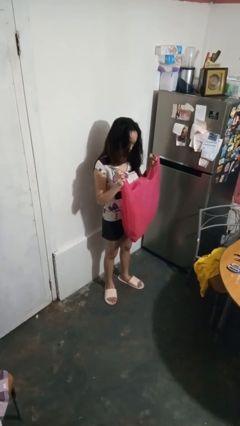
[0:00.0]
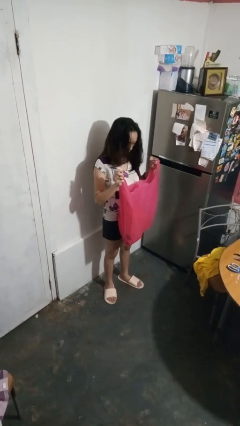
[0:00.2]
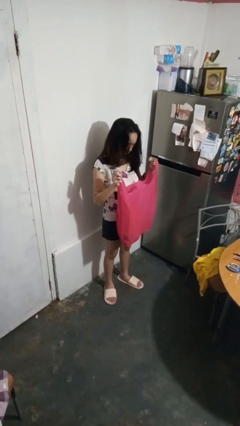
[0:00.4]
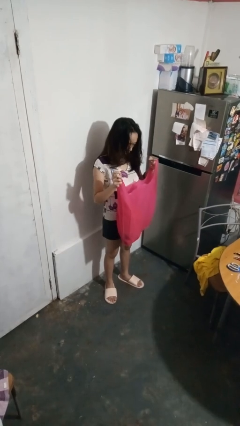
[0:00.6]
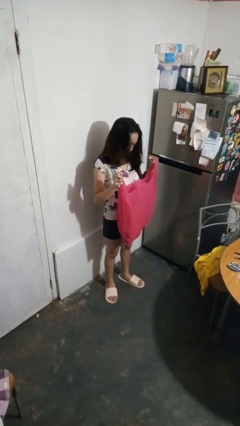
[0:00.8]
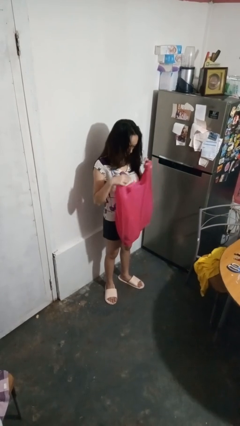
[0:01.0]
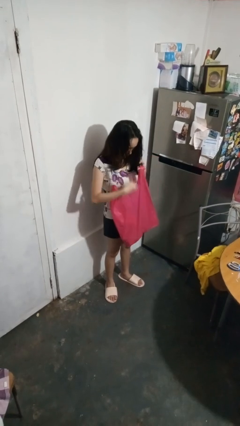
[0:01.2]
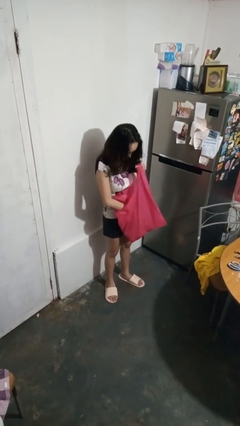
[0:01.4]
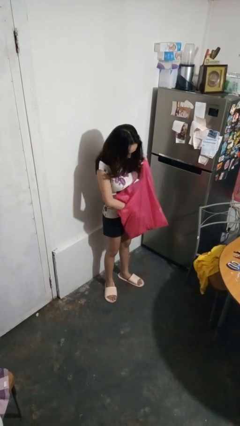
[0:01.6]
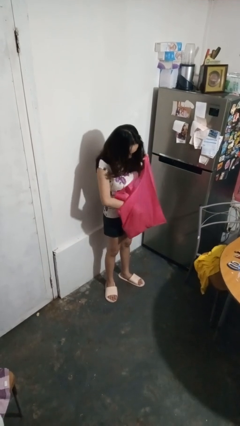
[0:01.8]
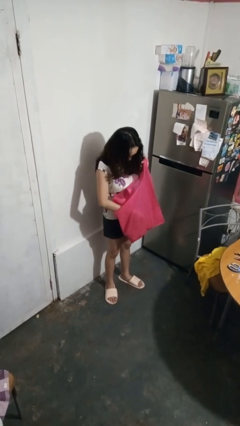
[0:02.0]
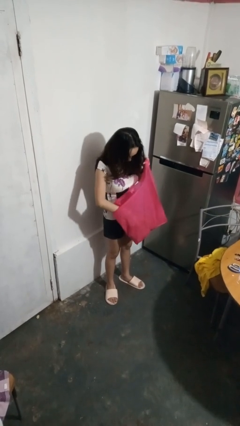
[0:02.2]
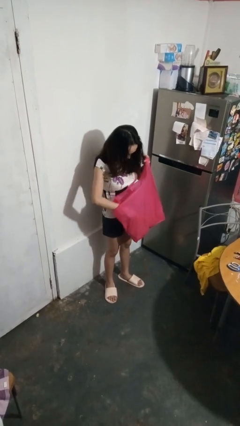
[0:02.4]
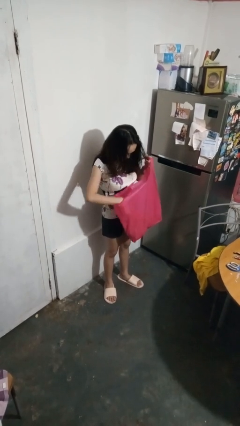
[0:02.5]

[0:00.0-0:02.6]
person searches in box

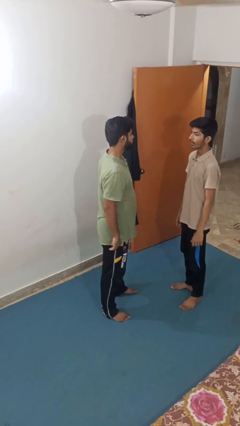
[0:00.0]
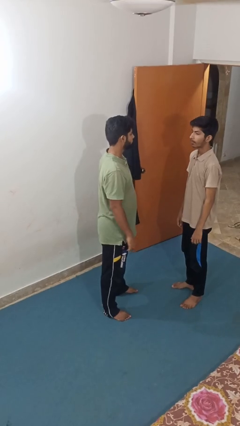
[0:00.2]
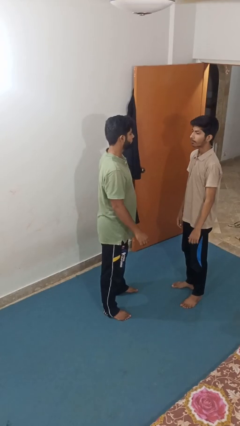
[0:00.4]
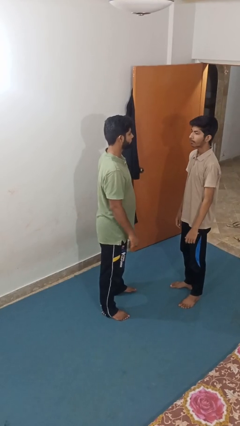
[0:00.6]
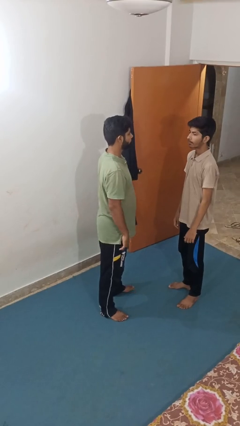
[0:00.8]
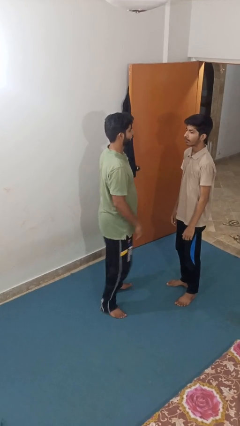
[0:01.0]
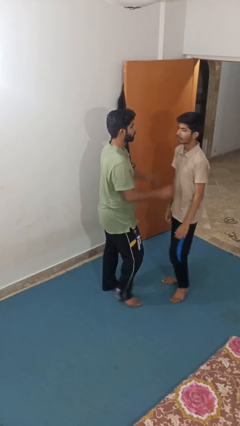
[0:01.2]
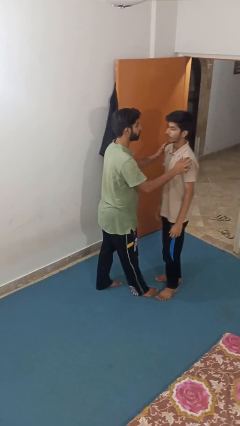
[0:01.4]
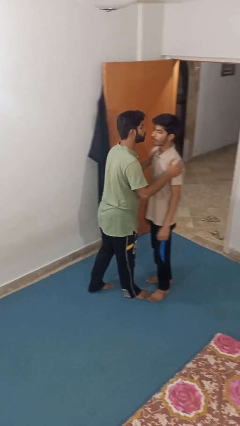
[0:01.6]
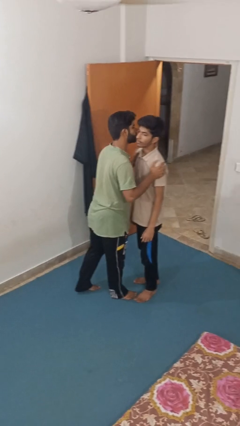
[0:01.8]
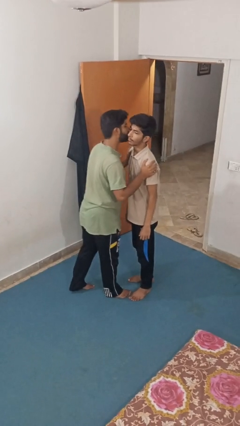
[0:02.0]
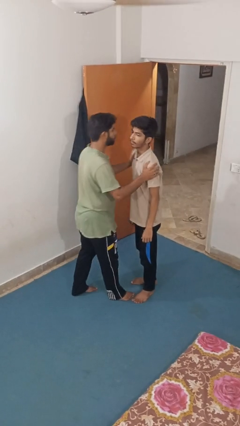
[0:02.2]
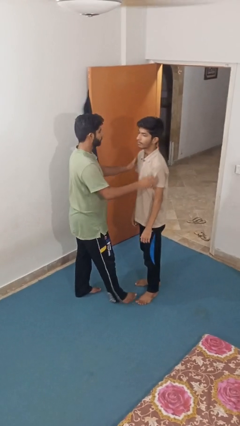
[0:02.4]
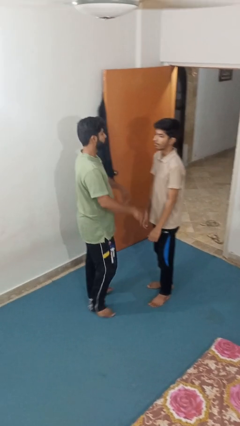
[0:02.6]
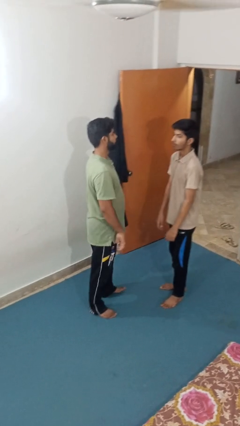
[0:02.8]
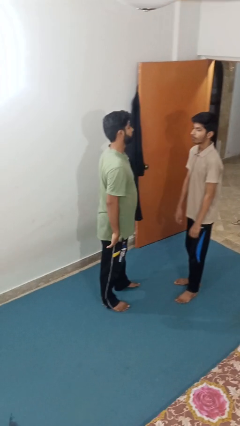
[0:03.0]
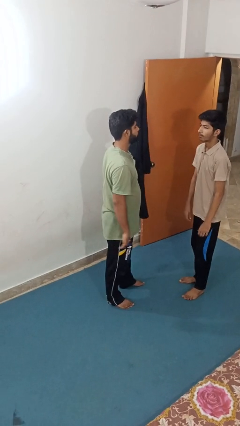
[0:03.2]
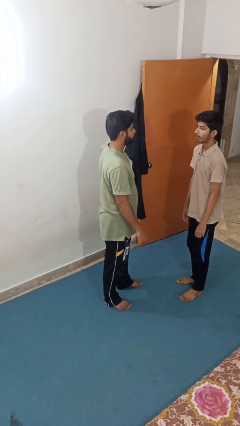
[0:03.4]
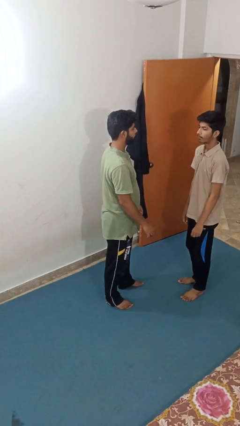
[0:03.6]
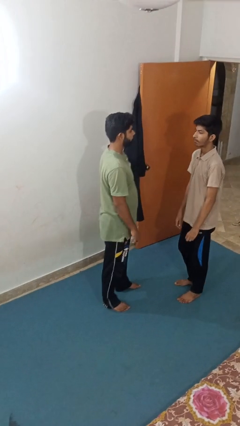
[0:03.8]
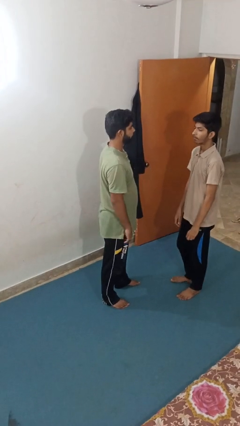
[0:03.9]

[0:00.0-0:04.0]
person kisses cheek of person

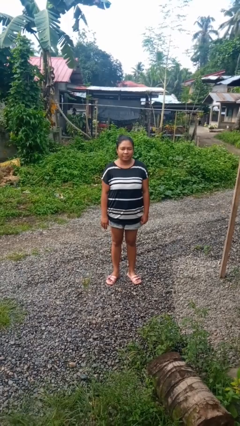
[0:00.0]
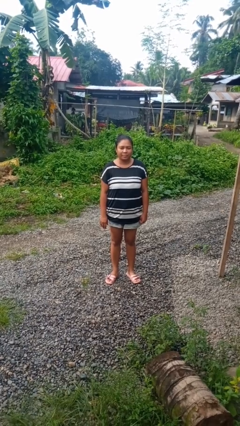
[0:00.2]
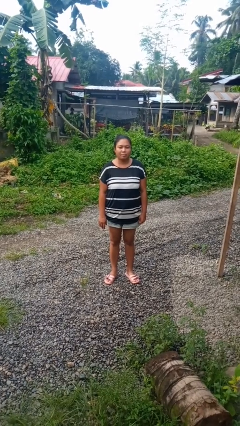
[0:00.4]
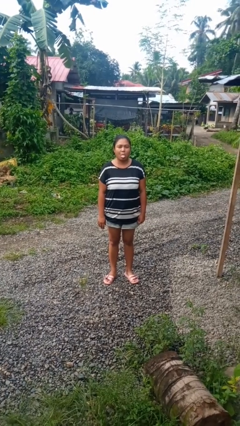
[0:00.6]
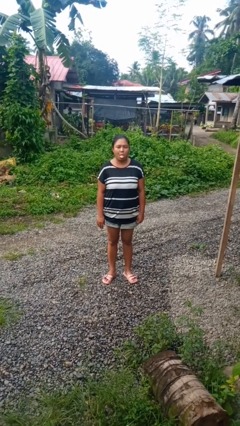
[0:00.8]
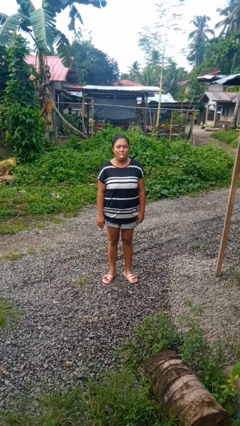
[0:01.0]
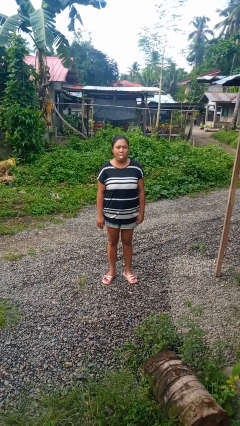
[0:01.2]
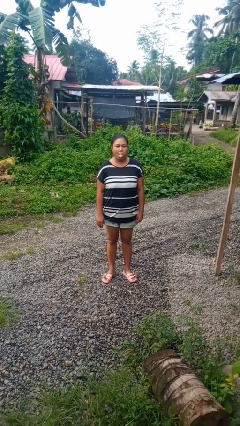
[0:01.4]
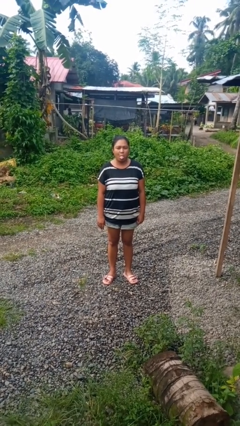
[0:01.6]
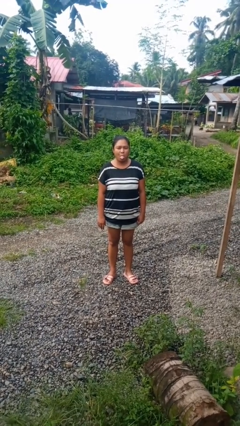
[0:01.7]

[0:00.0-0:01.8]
person sticks out tongue

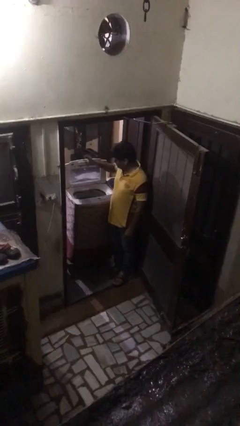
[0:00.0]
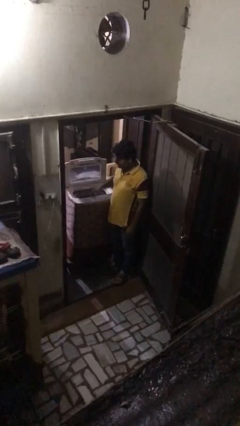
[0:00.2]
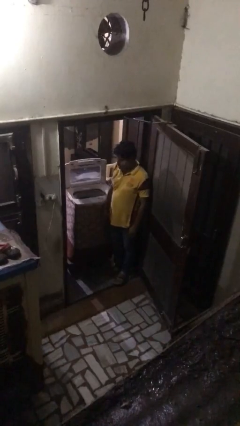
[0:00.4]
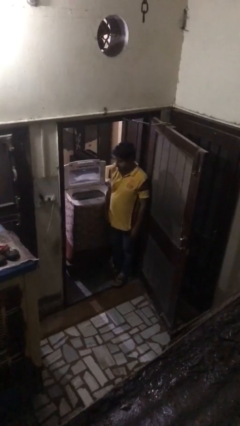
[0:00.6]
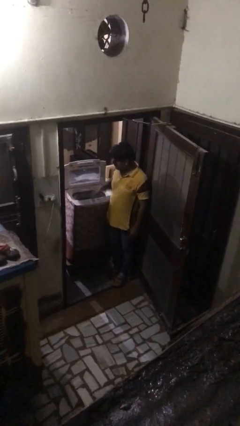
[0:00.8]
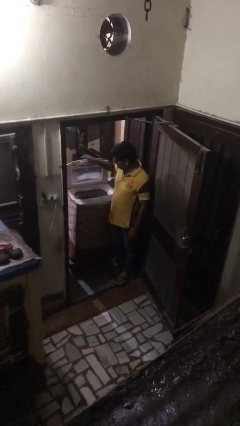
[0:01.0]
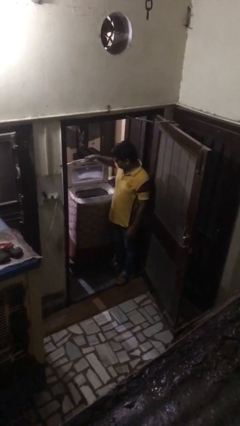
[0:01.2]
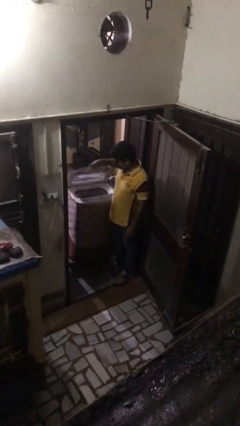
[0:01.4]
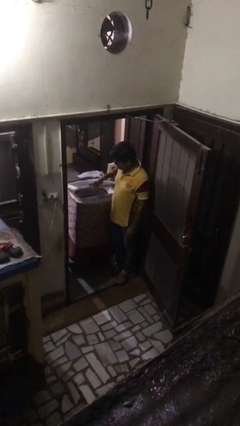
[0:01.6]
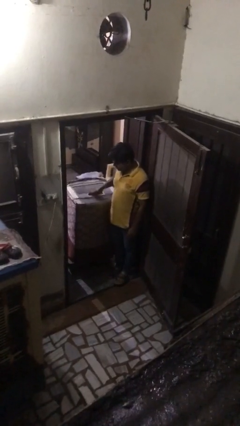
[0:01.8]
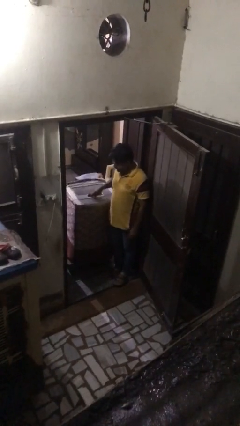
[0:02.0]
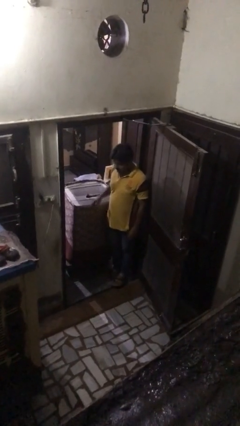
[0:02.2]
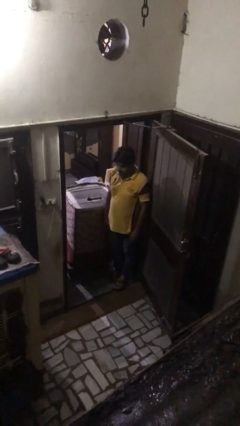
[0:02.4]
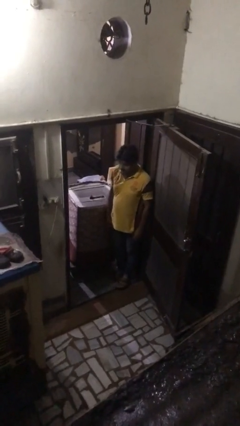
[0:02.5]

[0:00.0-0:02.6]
person closes clothes washer

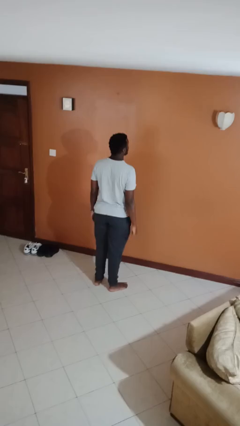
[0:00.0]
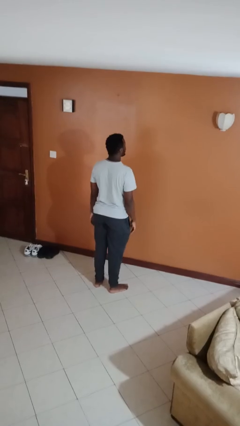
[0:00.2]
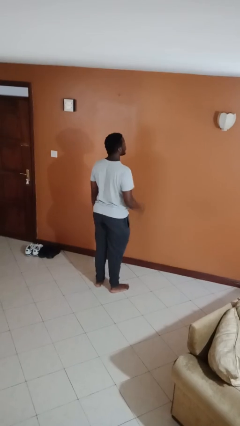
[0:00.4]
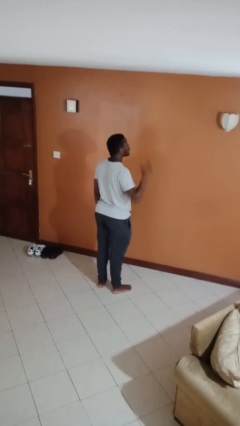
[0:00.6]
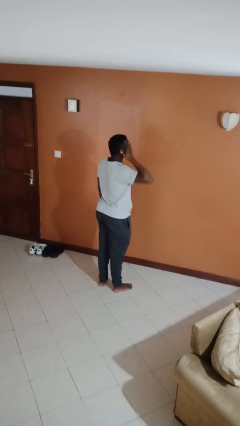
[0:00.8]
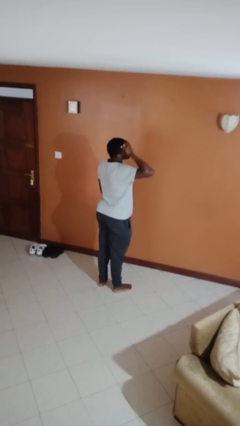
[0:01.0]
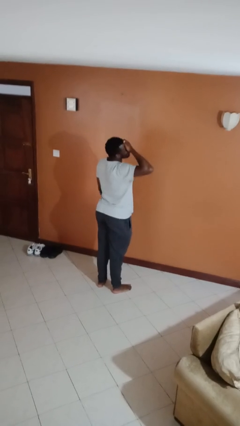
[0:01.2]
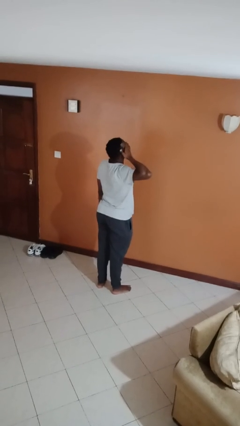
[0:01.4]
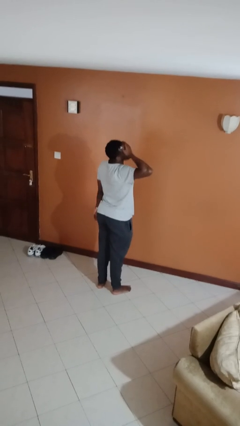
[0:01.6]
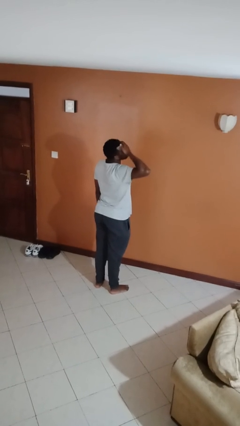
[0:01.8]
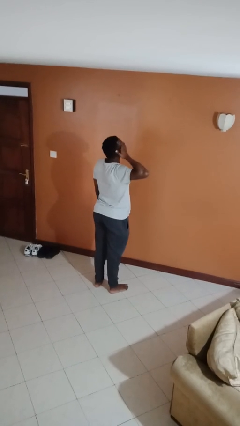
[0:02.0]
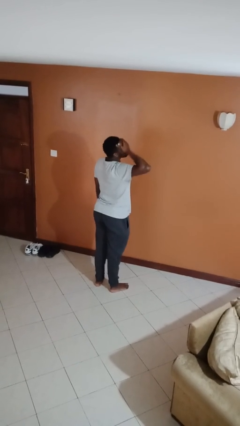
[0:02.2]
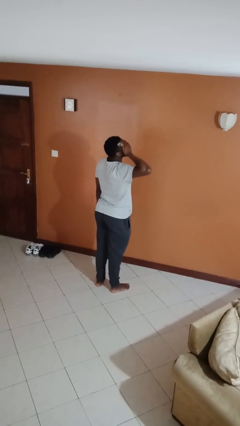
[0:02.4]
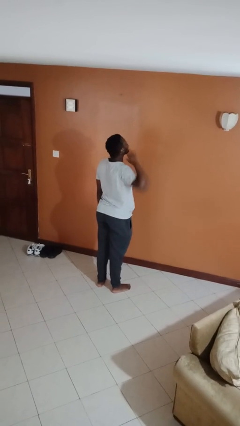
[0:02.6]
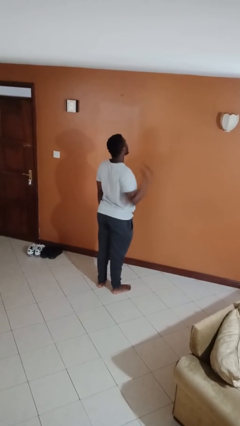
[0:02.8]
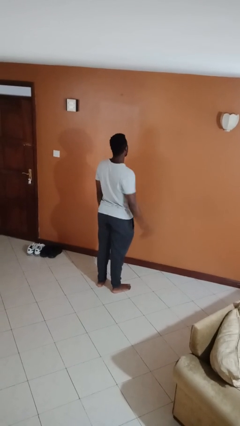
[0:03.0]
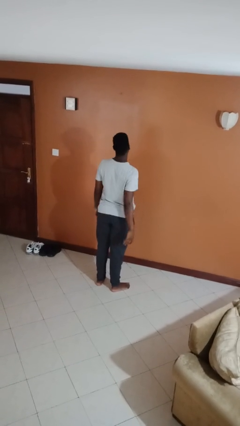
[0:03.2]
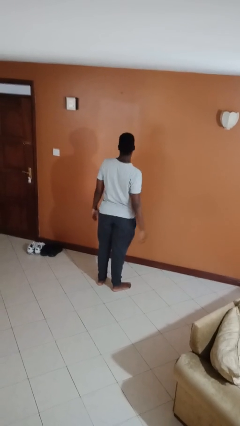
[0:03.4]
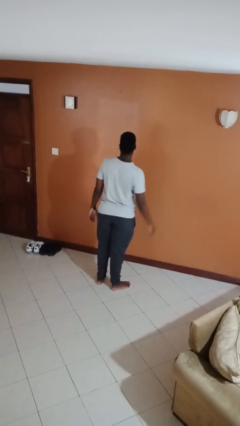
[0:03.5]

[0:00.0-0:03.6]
person rubs eyes

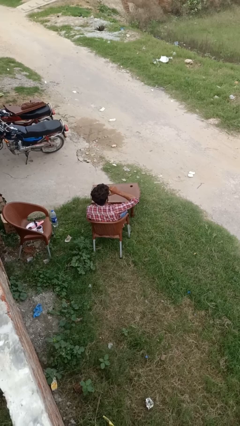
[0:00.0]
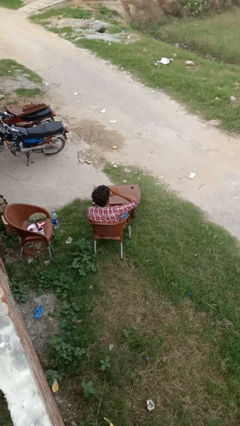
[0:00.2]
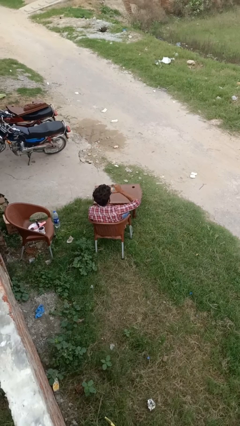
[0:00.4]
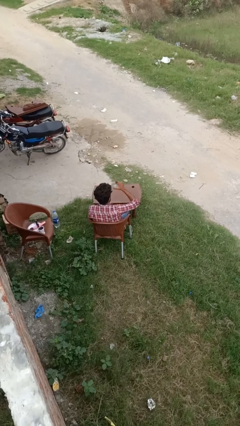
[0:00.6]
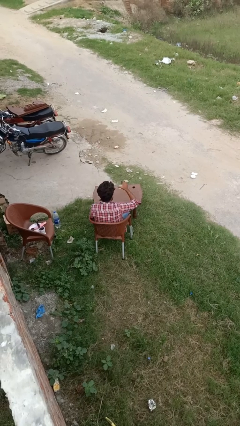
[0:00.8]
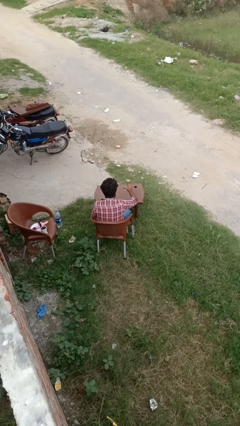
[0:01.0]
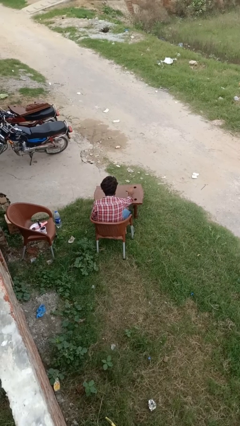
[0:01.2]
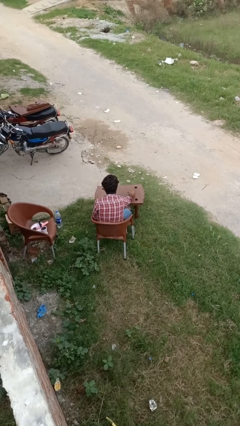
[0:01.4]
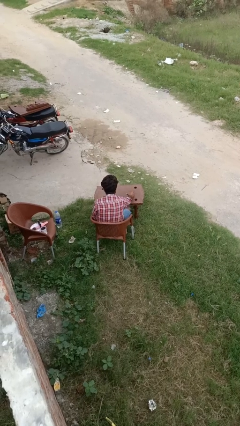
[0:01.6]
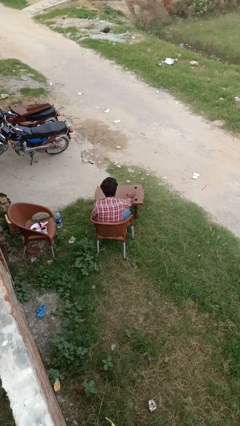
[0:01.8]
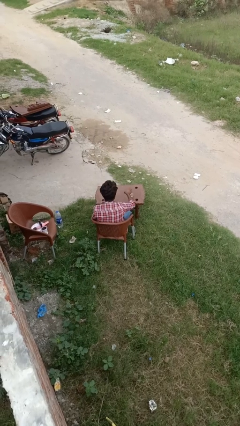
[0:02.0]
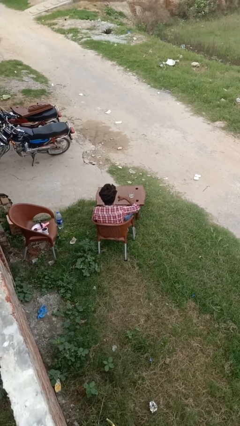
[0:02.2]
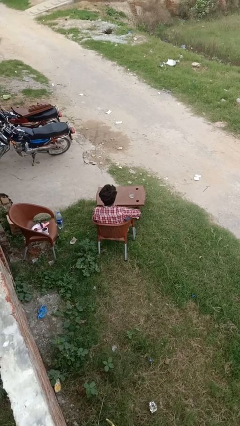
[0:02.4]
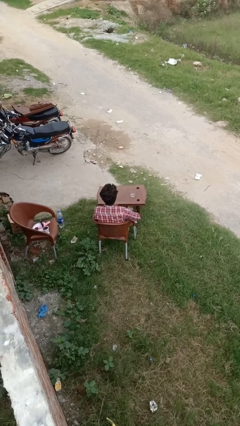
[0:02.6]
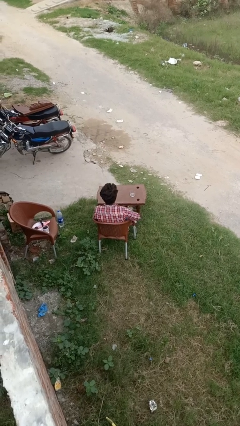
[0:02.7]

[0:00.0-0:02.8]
person puts down object on table
